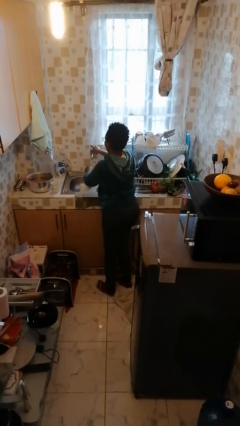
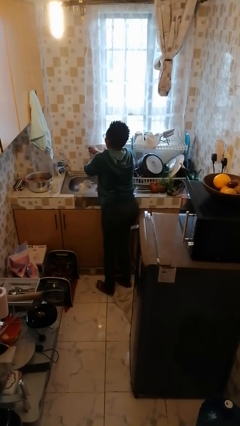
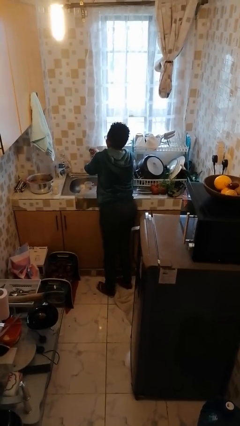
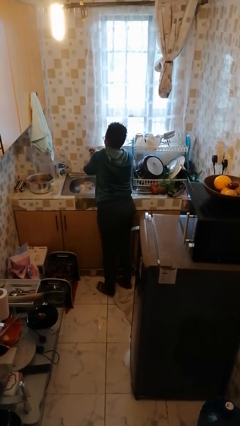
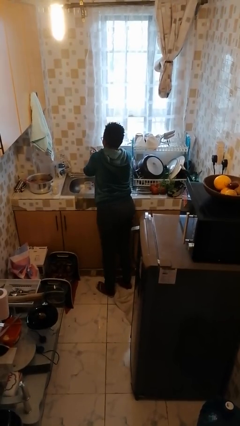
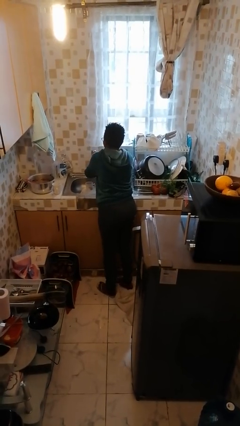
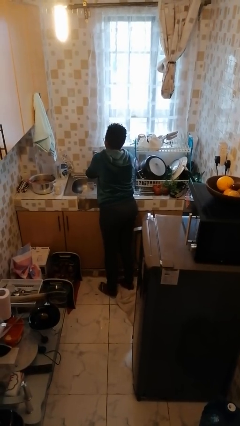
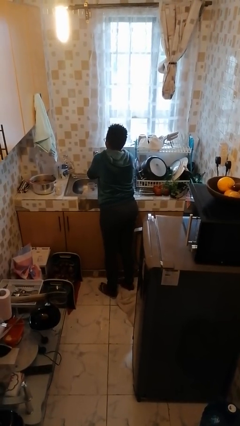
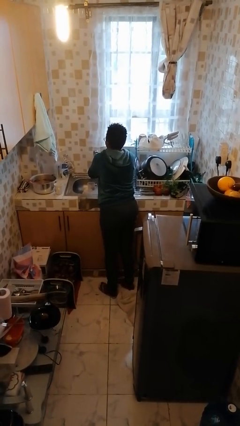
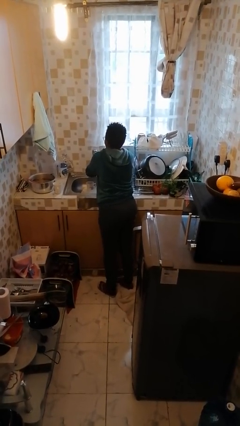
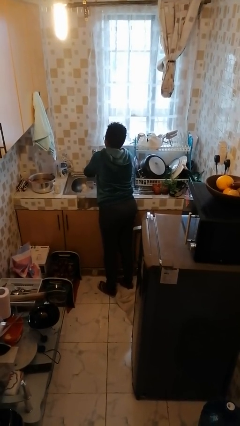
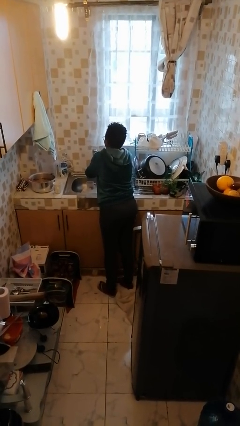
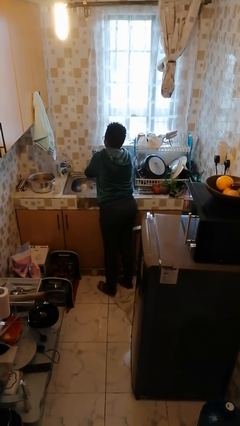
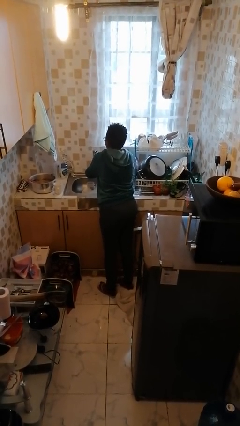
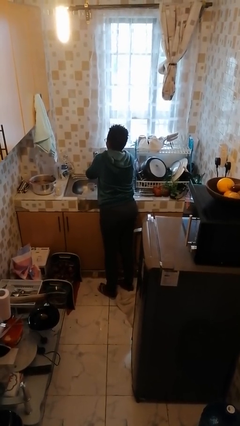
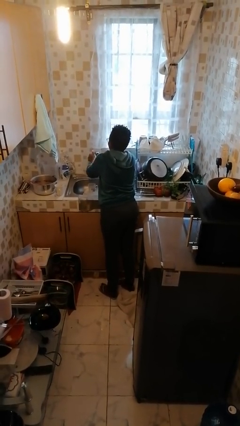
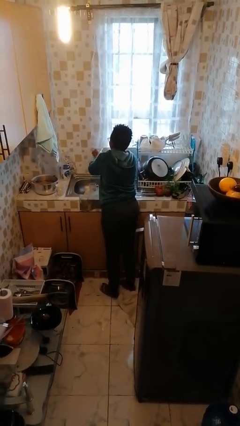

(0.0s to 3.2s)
person washes hands

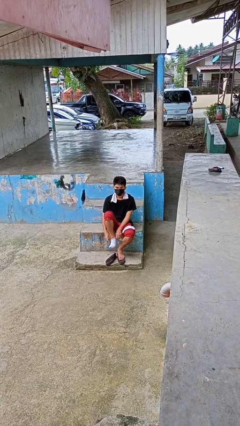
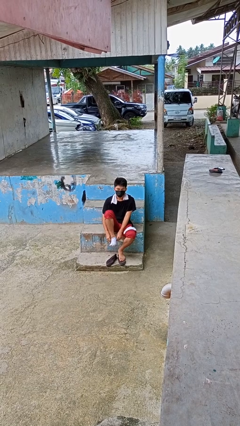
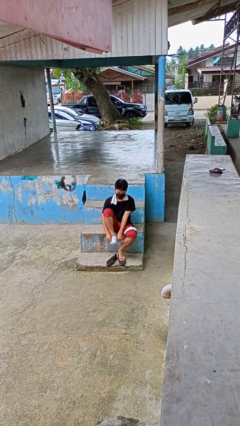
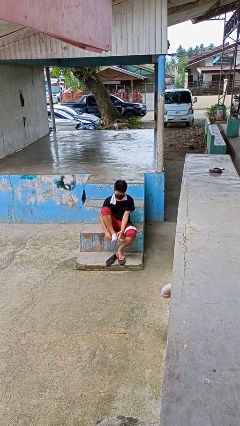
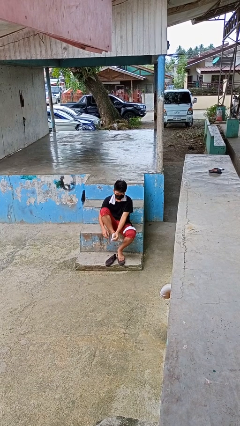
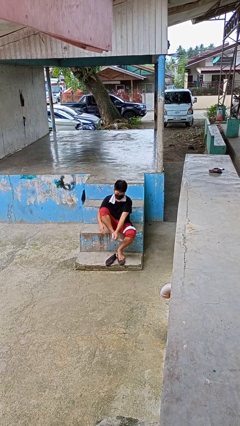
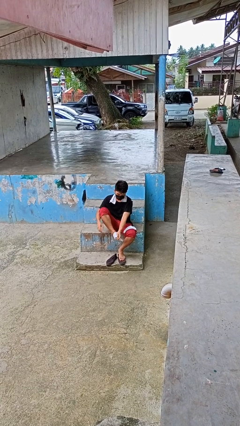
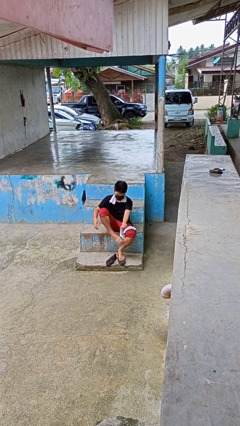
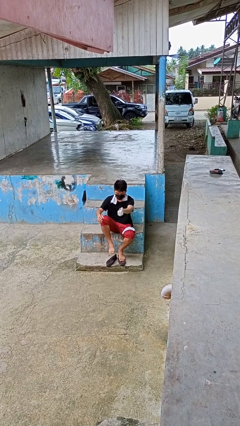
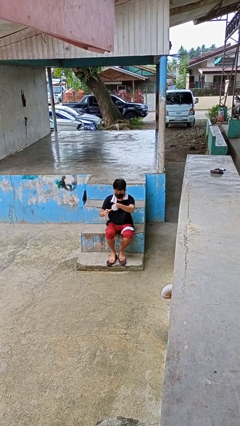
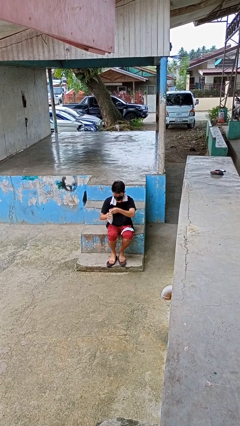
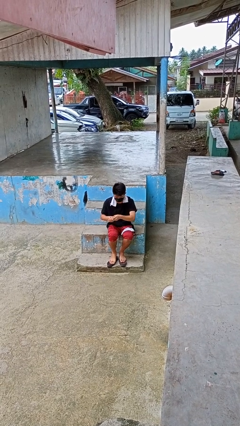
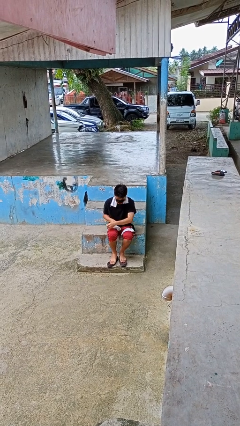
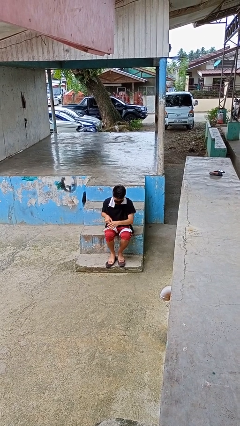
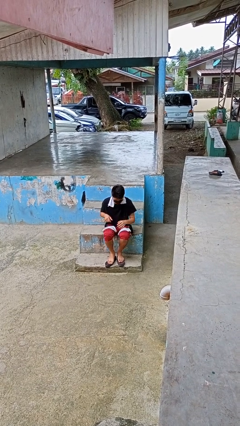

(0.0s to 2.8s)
person takes off socks

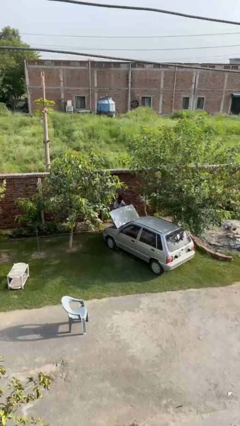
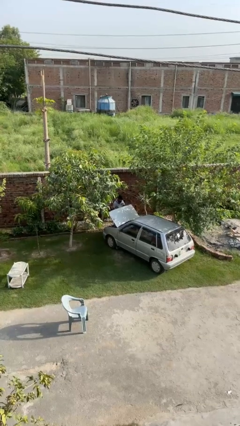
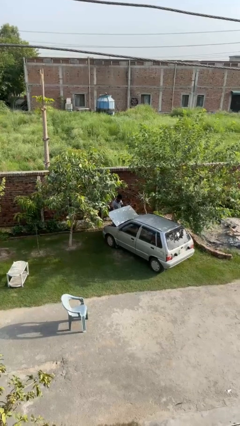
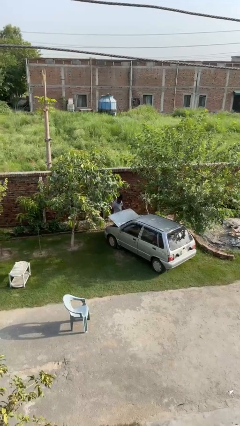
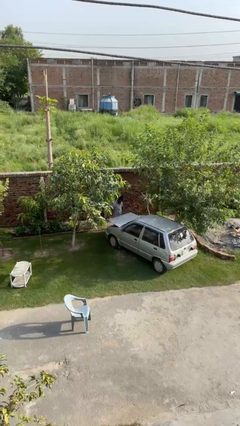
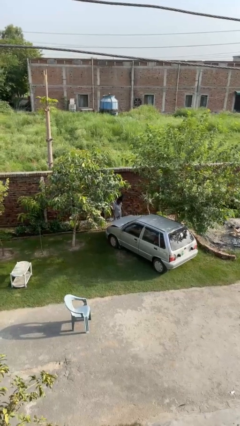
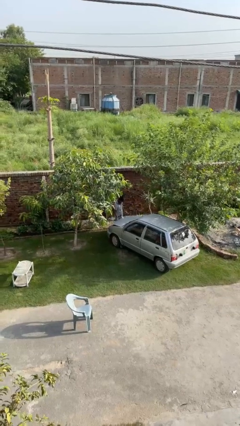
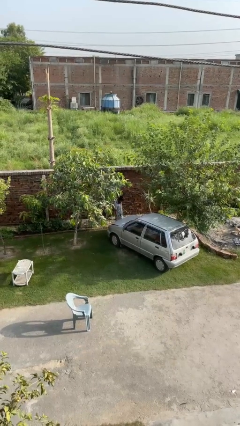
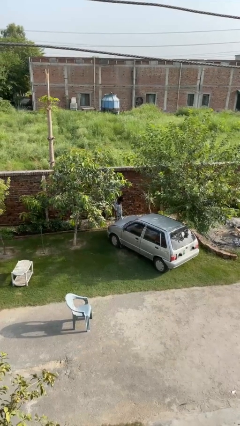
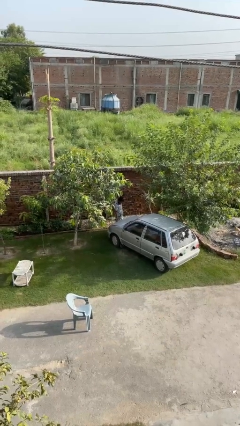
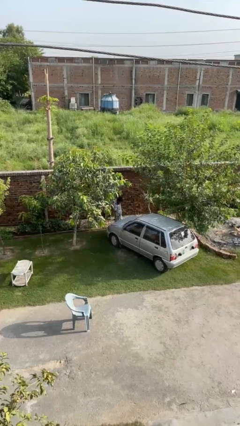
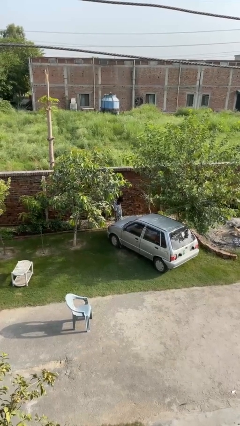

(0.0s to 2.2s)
person closes car hood

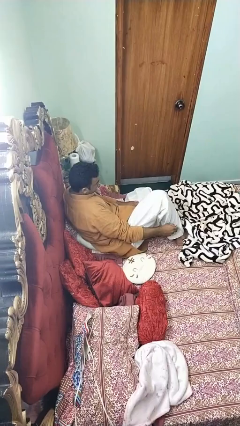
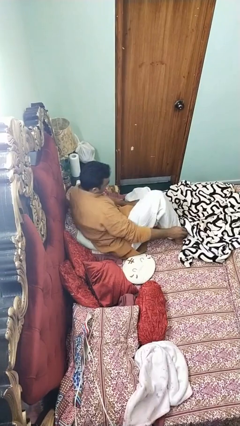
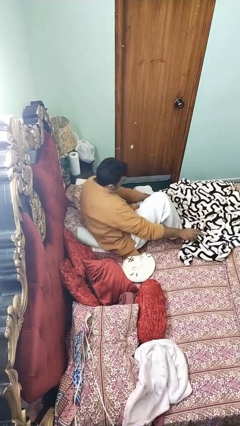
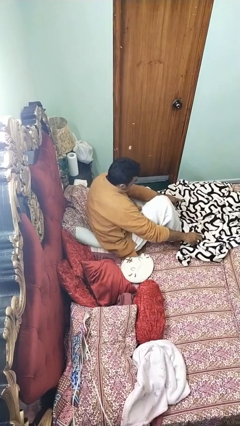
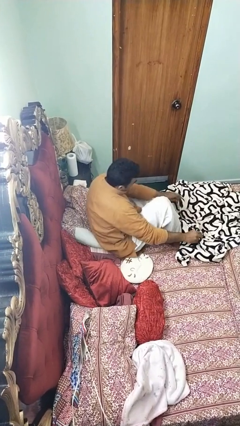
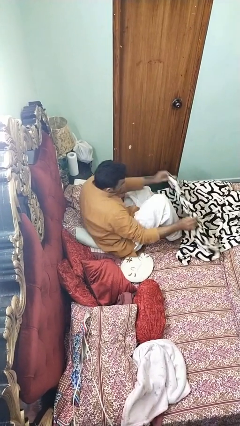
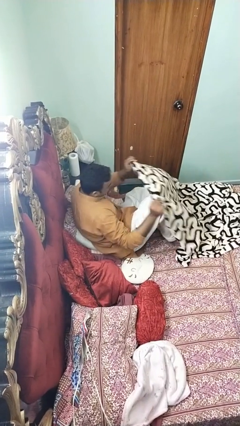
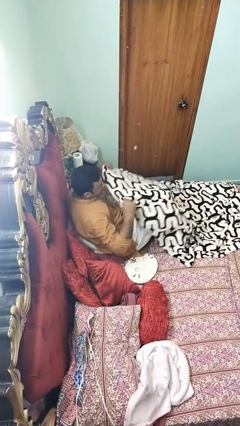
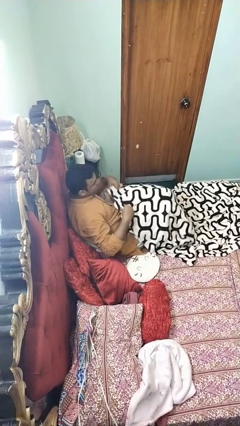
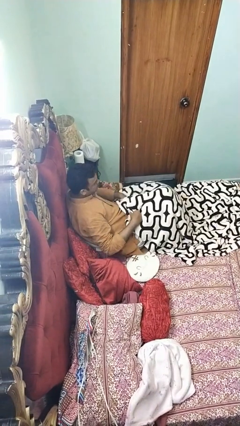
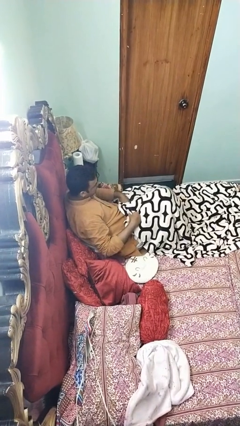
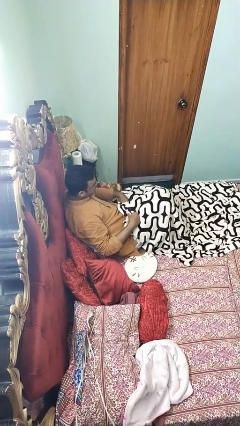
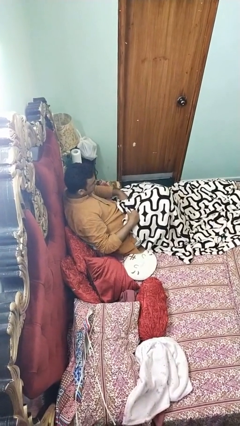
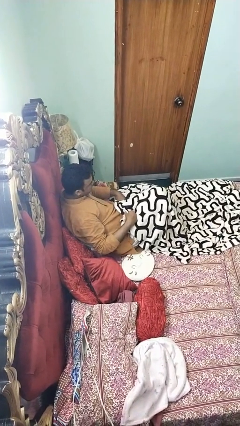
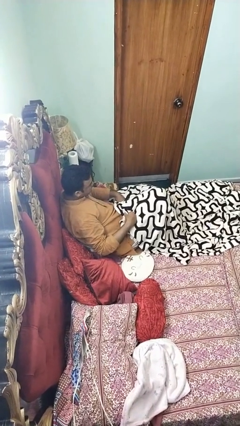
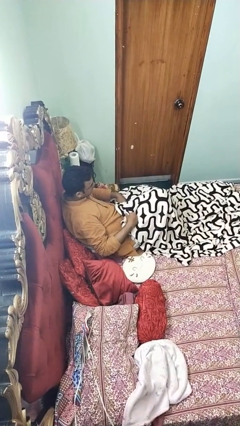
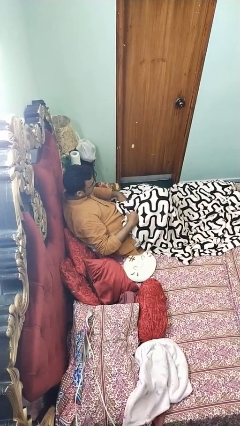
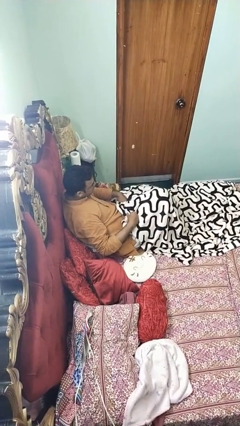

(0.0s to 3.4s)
person covers with blanket

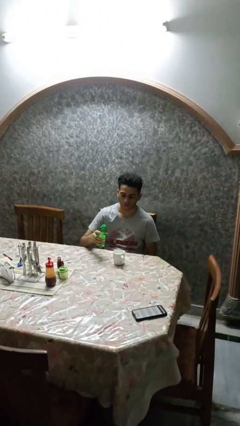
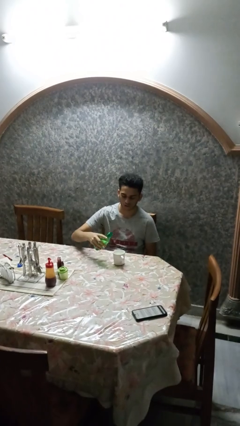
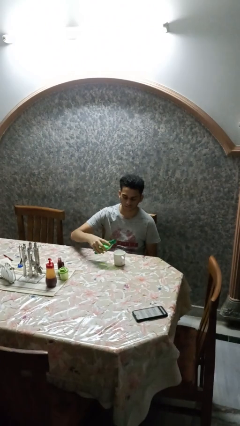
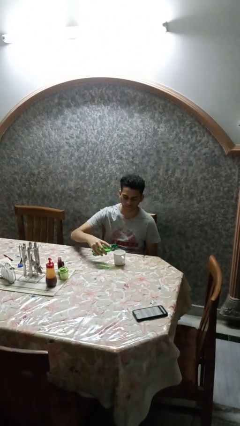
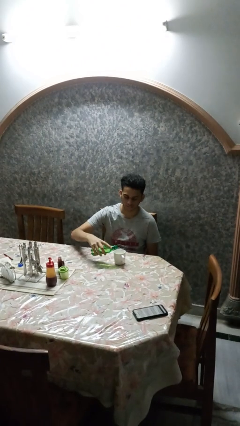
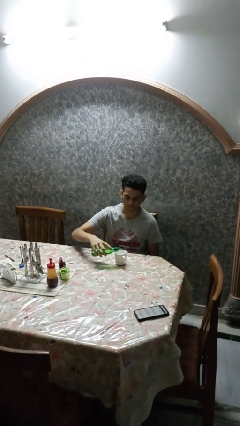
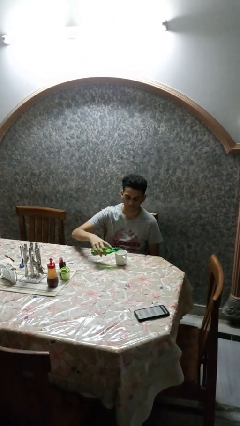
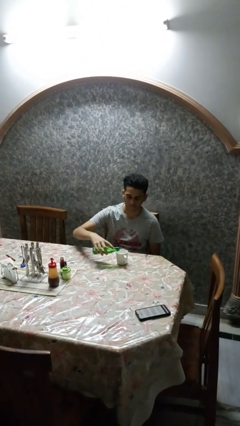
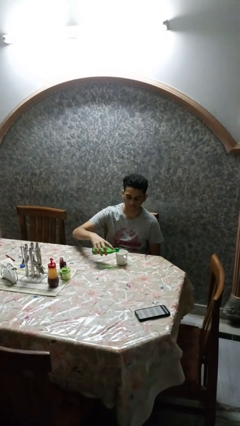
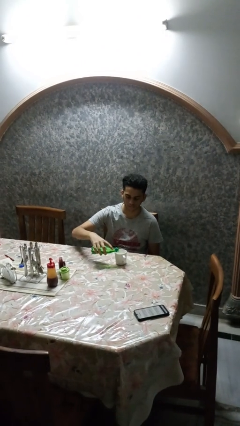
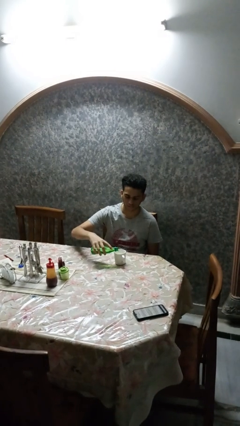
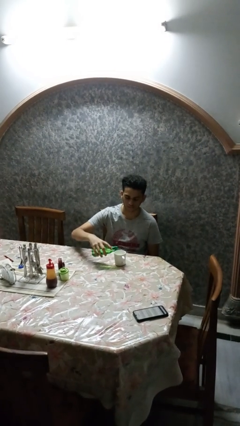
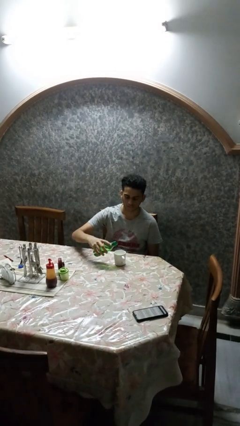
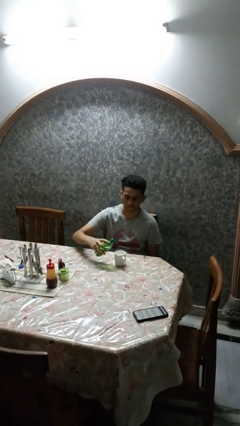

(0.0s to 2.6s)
person pours liquid into cup

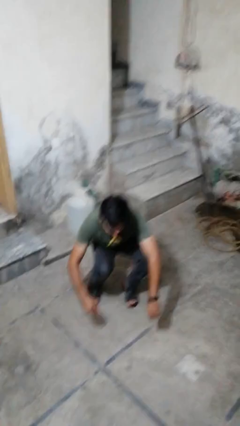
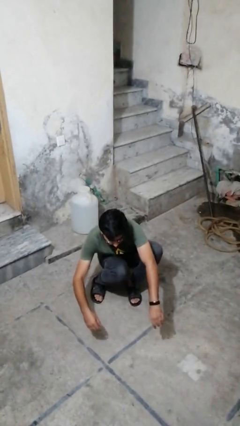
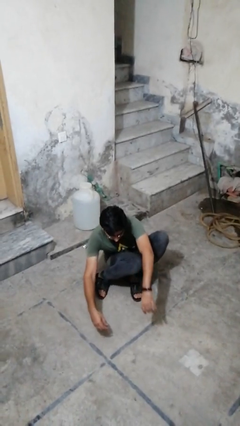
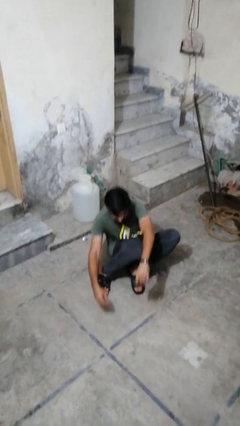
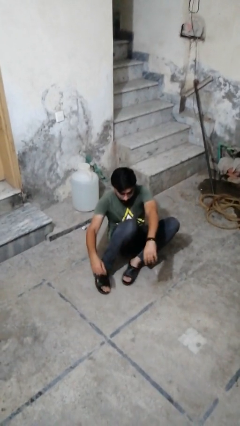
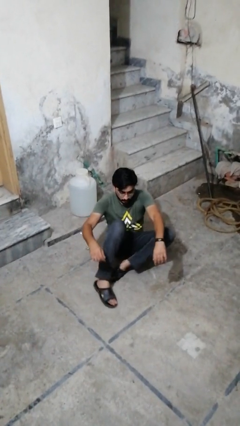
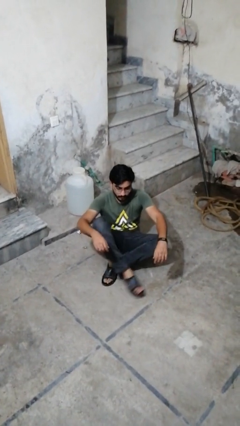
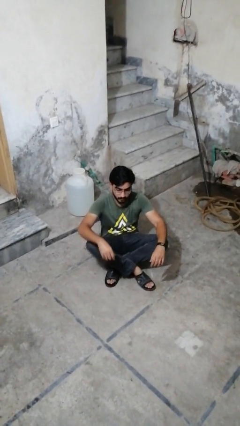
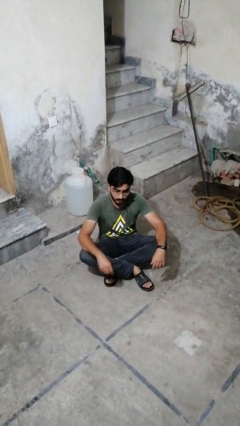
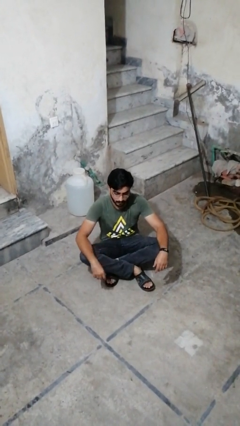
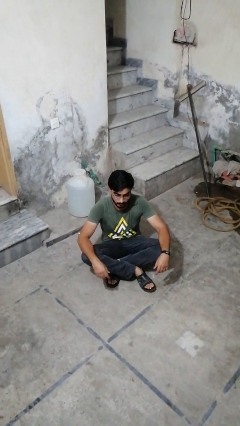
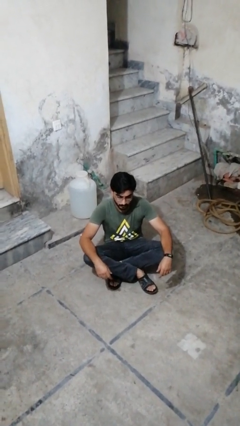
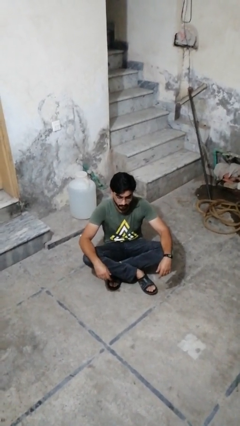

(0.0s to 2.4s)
person sits crisscross

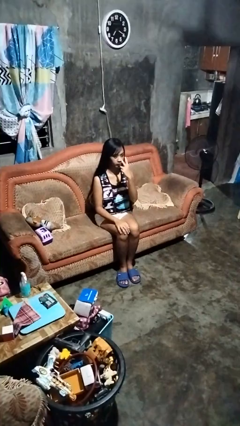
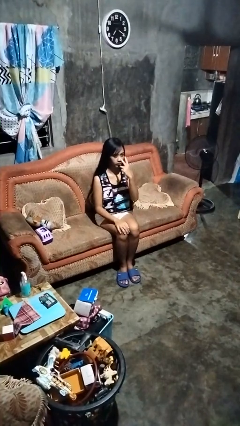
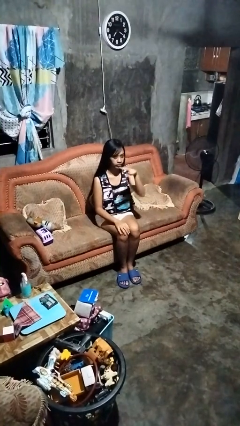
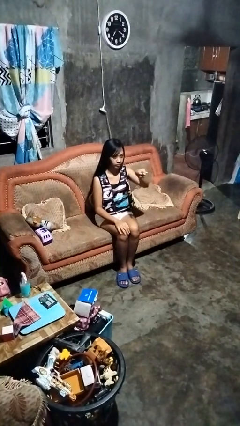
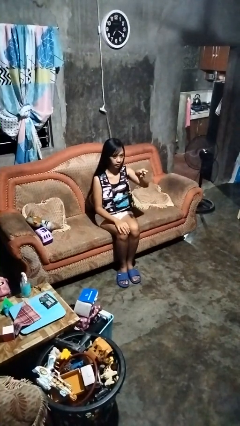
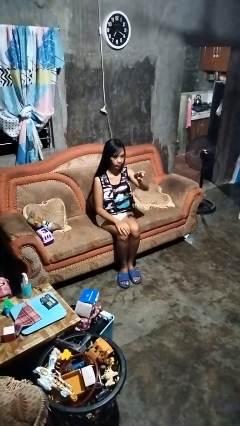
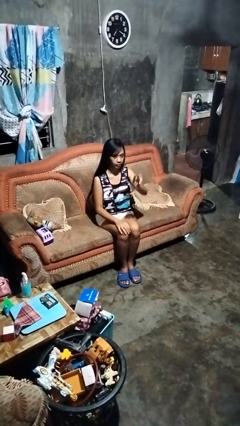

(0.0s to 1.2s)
person gestures watch closely
